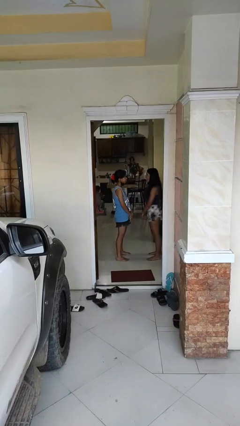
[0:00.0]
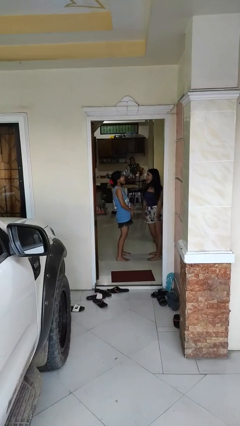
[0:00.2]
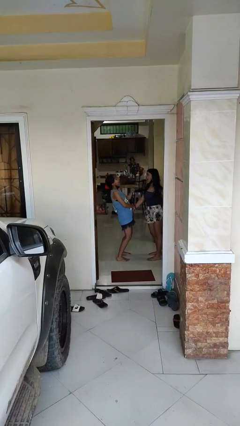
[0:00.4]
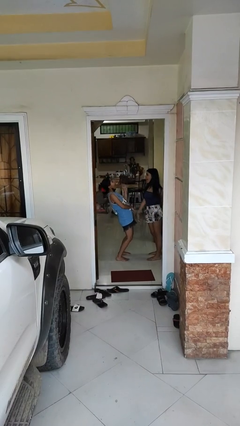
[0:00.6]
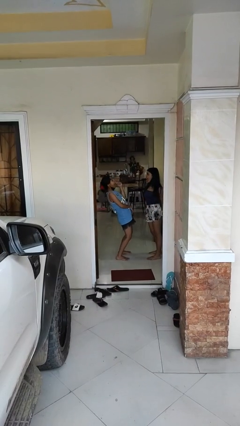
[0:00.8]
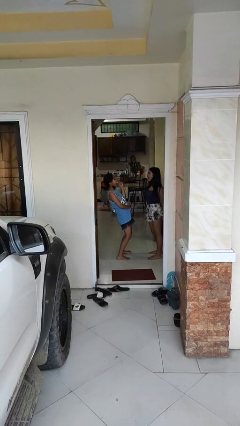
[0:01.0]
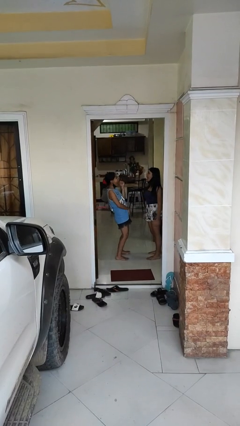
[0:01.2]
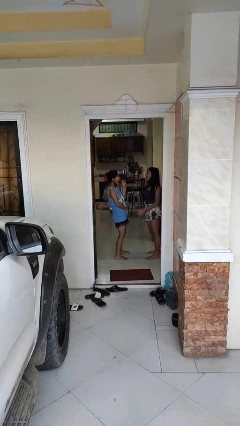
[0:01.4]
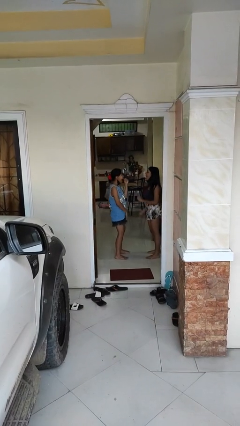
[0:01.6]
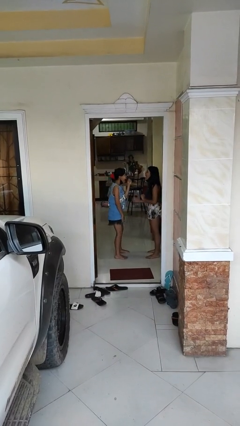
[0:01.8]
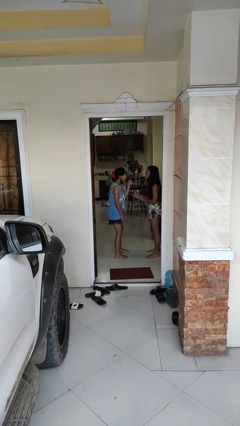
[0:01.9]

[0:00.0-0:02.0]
person laughs with person

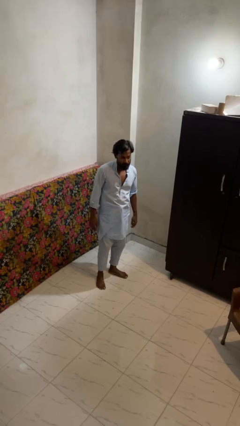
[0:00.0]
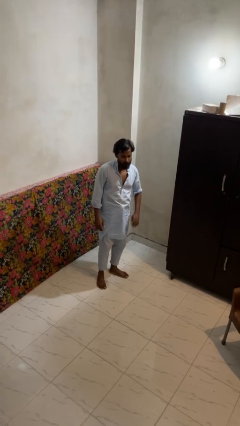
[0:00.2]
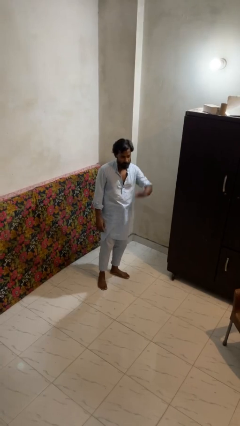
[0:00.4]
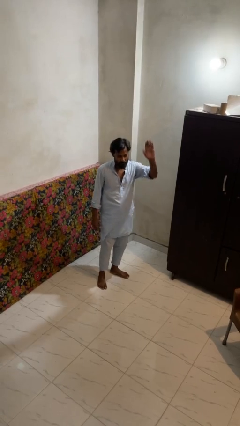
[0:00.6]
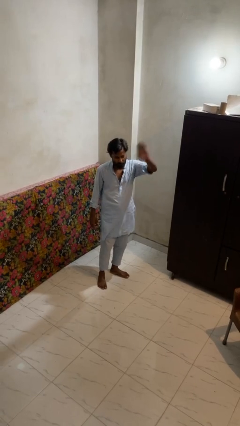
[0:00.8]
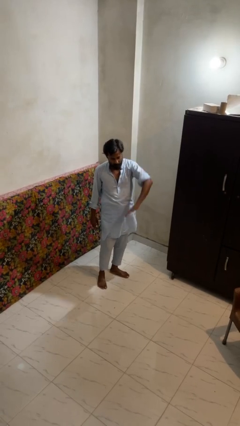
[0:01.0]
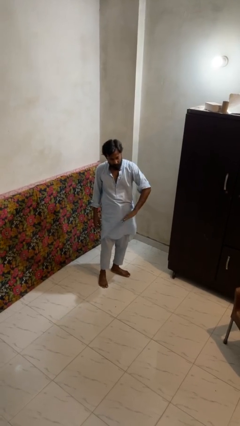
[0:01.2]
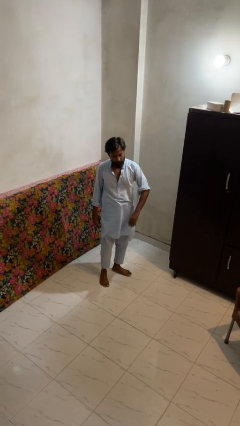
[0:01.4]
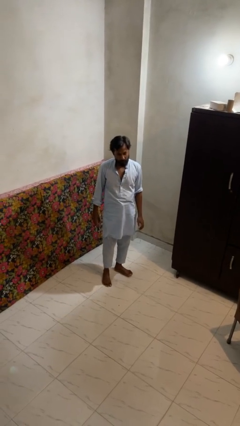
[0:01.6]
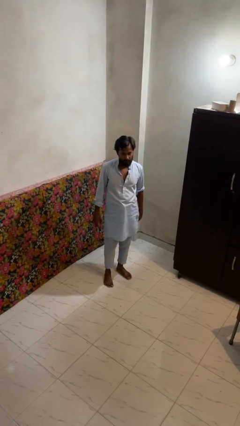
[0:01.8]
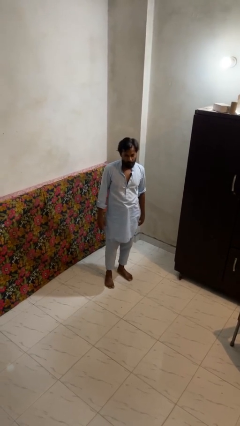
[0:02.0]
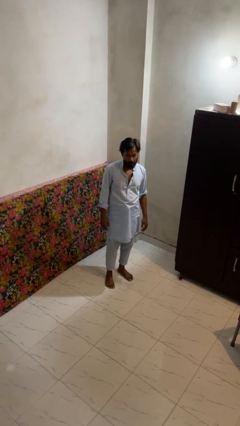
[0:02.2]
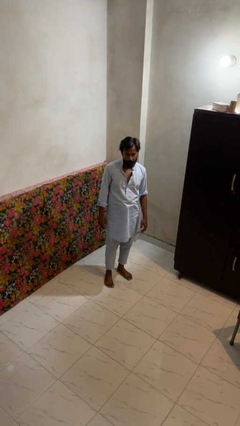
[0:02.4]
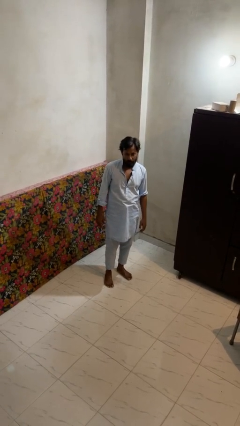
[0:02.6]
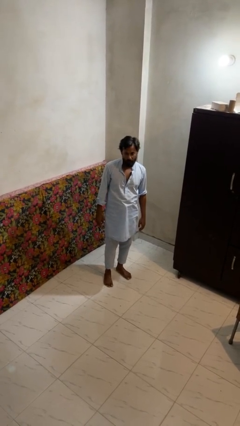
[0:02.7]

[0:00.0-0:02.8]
person gestures swipe down

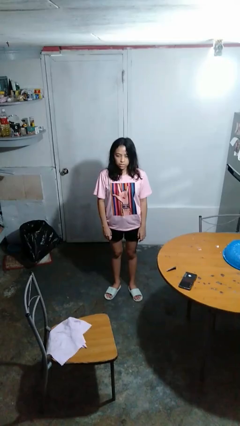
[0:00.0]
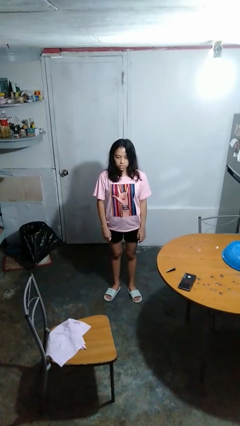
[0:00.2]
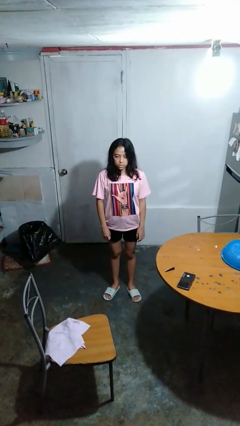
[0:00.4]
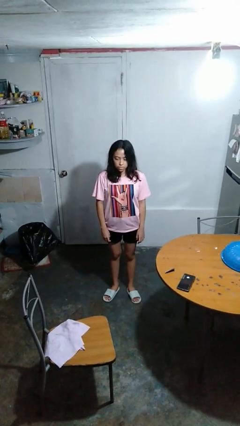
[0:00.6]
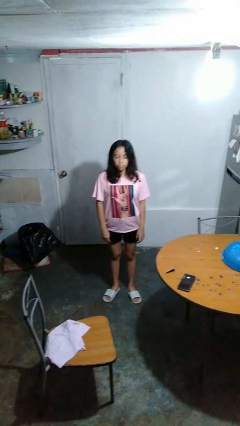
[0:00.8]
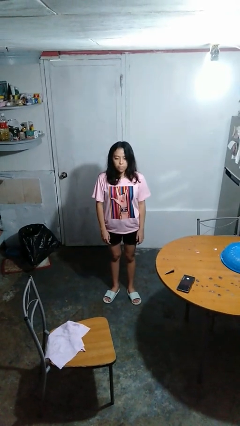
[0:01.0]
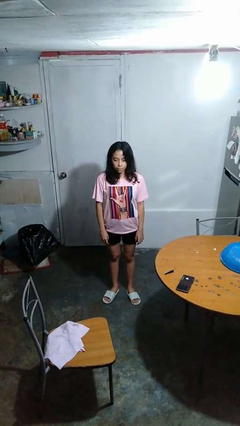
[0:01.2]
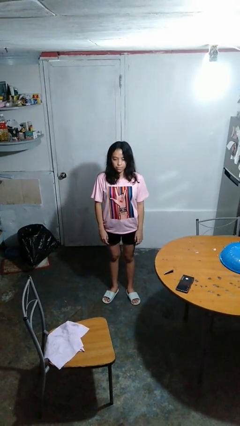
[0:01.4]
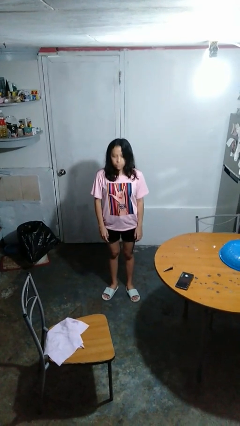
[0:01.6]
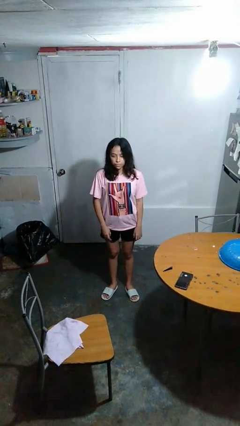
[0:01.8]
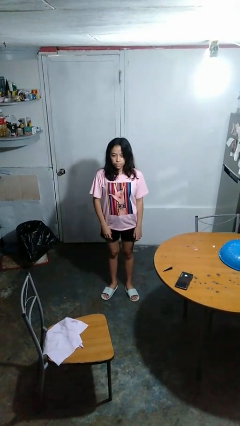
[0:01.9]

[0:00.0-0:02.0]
person nods head

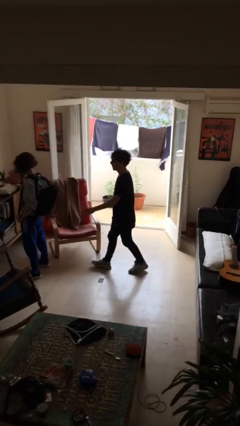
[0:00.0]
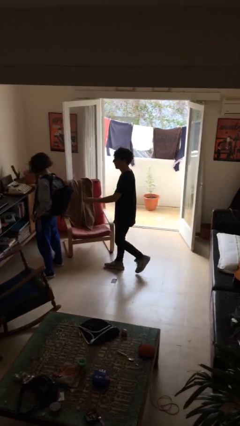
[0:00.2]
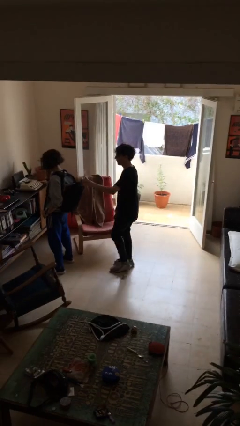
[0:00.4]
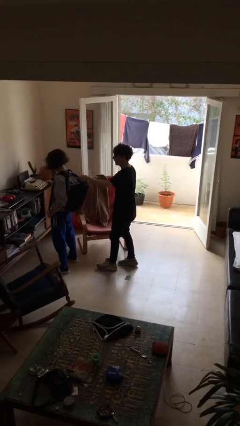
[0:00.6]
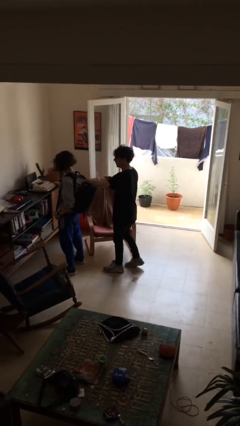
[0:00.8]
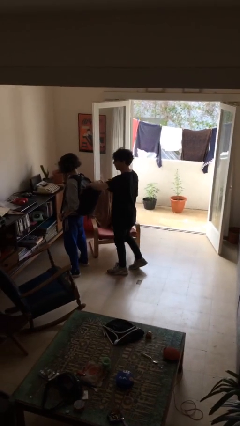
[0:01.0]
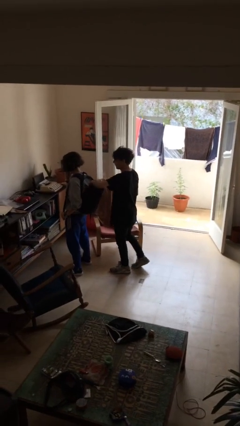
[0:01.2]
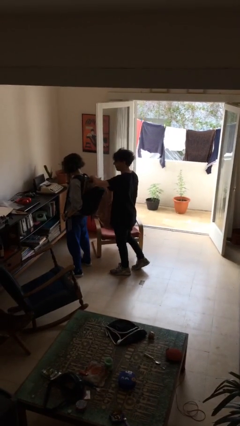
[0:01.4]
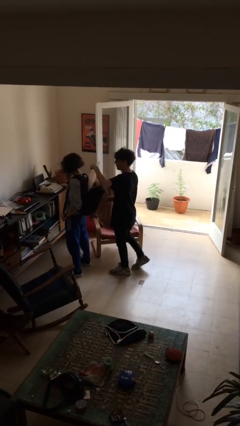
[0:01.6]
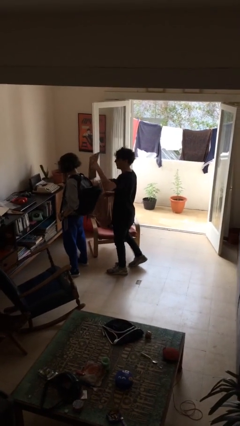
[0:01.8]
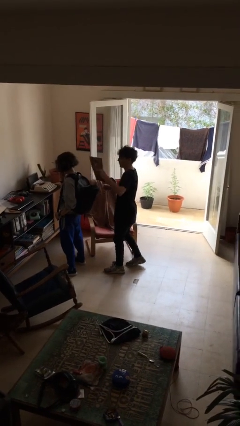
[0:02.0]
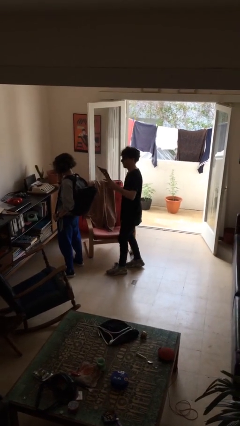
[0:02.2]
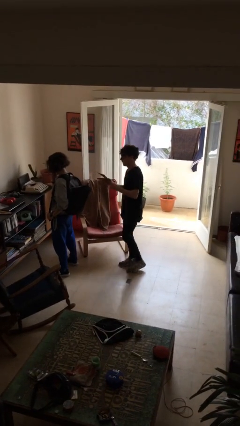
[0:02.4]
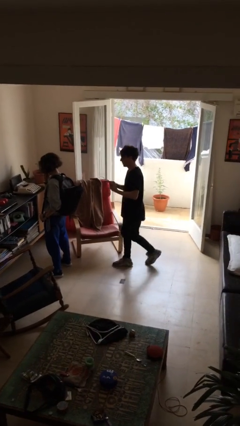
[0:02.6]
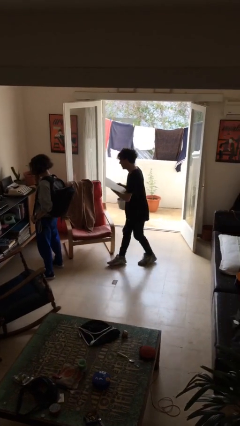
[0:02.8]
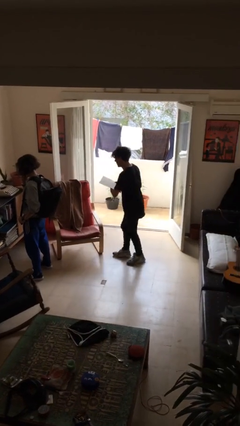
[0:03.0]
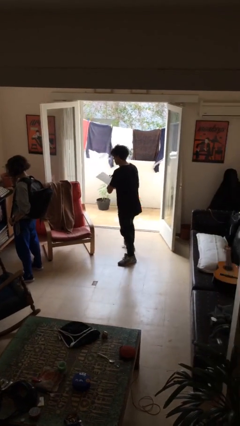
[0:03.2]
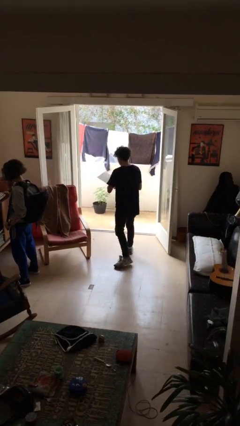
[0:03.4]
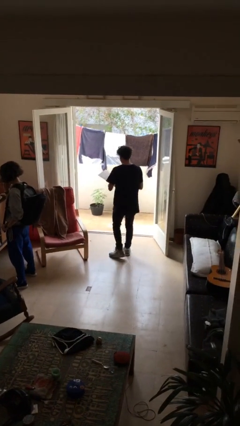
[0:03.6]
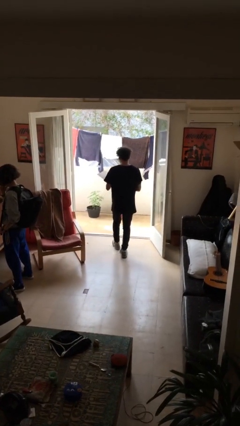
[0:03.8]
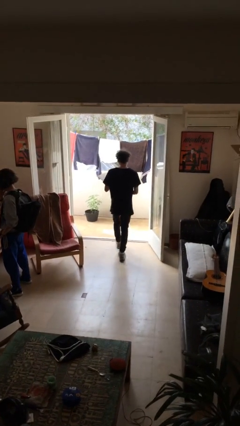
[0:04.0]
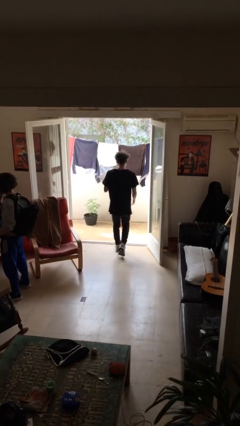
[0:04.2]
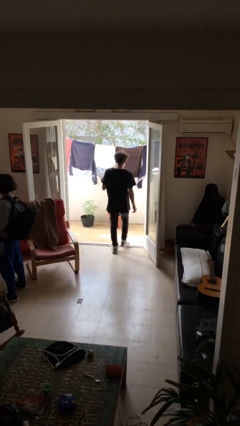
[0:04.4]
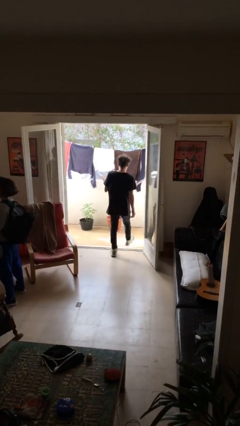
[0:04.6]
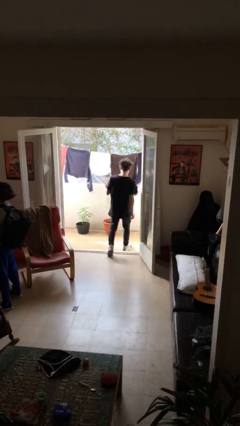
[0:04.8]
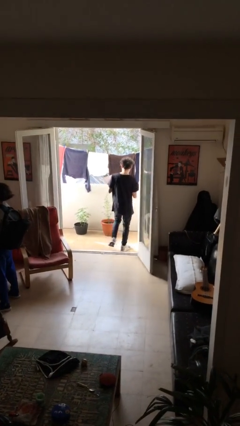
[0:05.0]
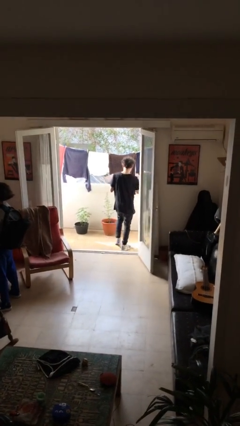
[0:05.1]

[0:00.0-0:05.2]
person steals object from person

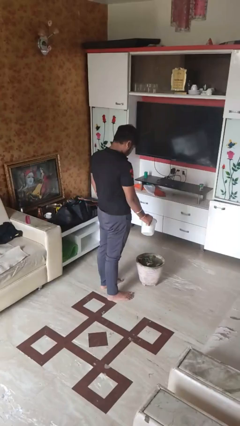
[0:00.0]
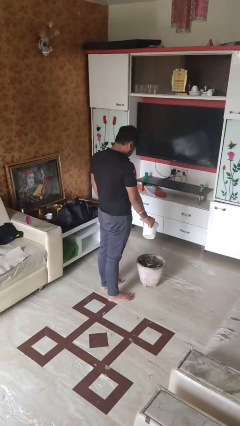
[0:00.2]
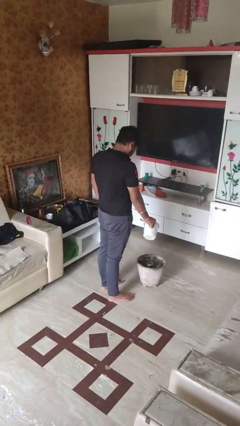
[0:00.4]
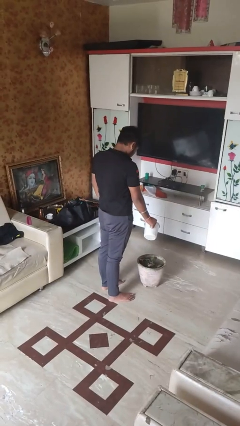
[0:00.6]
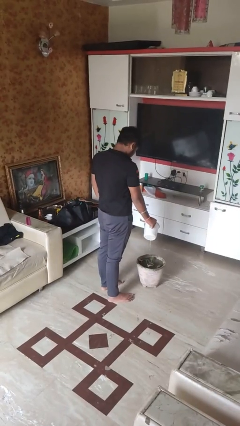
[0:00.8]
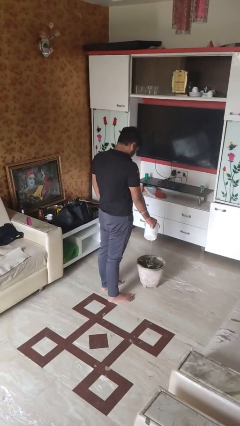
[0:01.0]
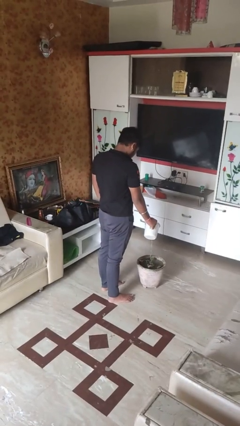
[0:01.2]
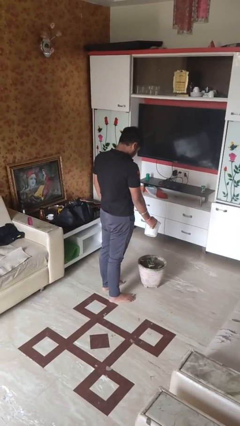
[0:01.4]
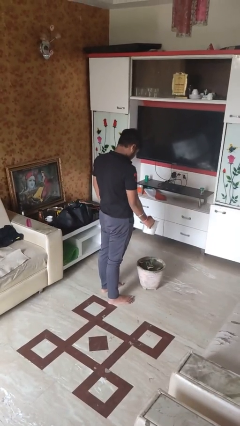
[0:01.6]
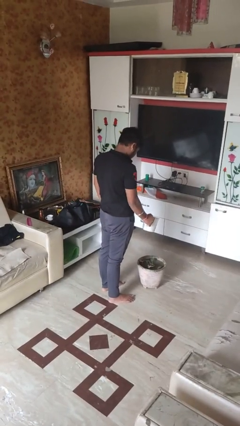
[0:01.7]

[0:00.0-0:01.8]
person waters houseplant

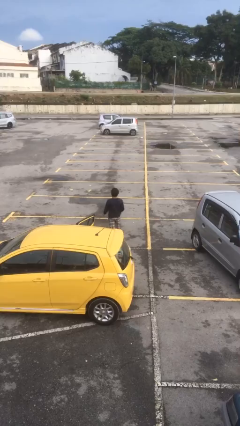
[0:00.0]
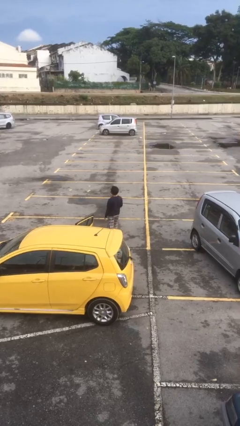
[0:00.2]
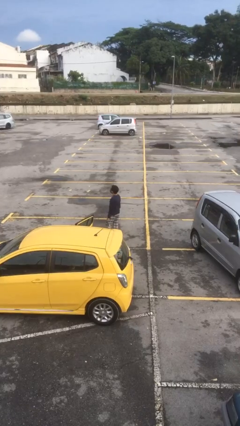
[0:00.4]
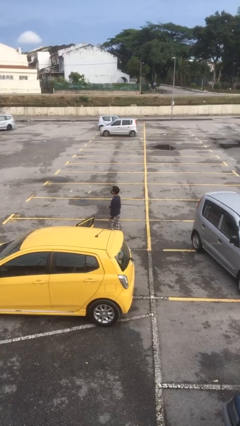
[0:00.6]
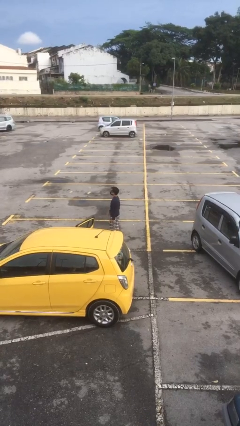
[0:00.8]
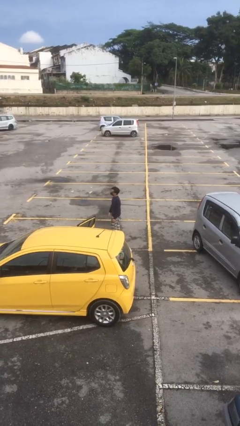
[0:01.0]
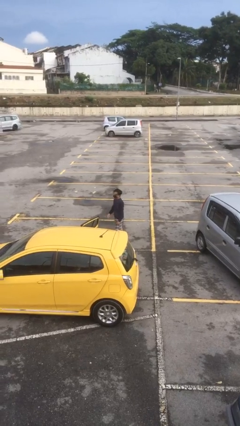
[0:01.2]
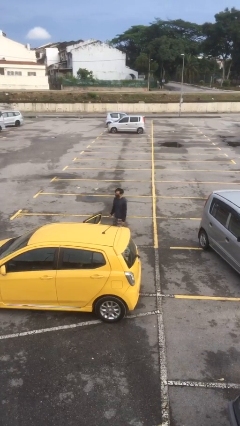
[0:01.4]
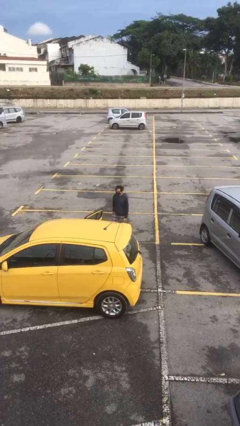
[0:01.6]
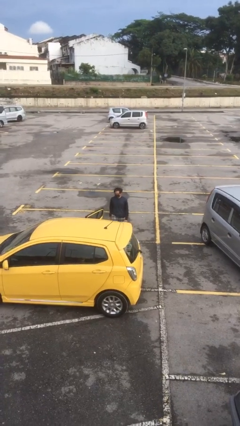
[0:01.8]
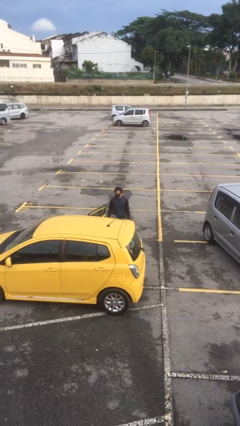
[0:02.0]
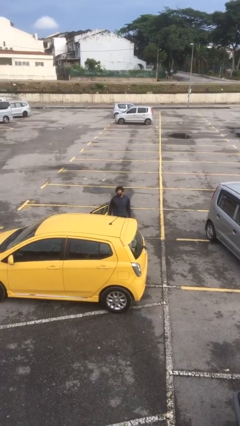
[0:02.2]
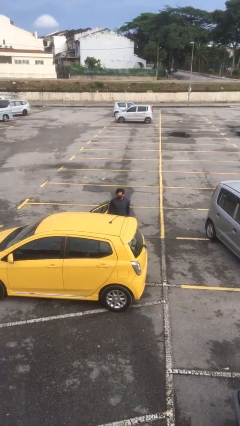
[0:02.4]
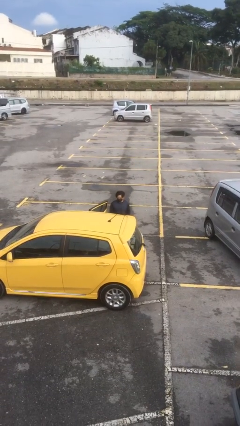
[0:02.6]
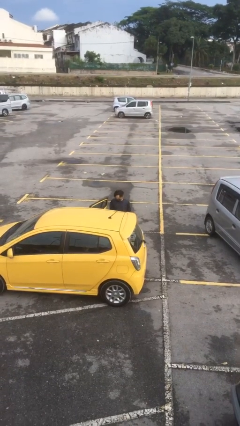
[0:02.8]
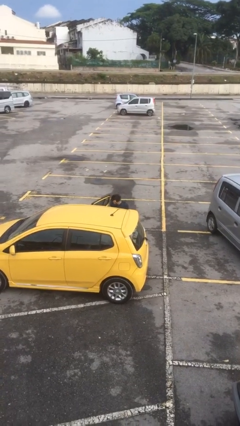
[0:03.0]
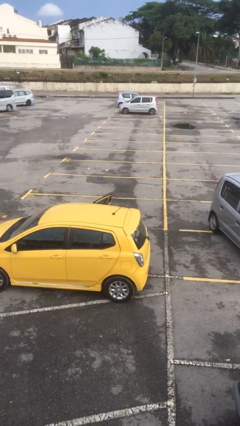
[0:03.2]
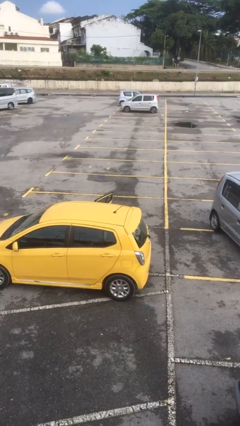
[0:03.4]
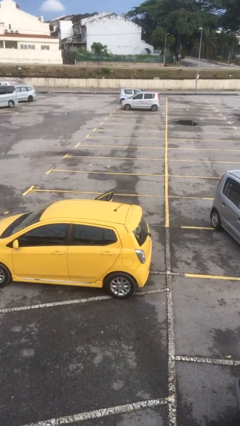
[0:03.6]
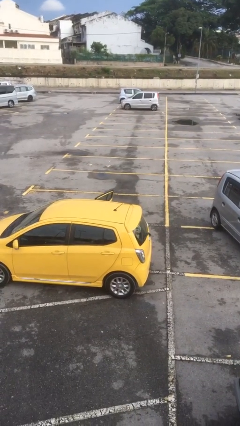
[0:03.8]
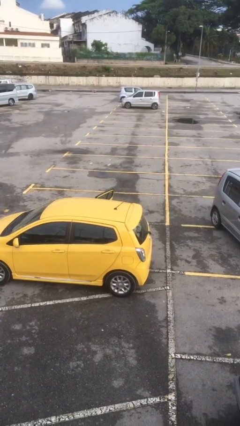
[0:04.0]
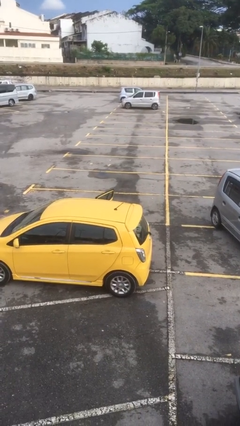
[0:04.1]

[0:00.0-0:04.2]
person enters car
